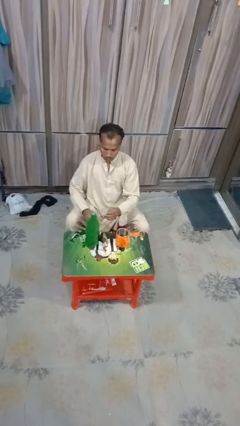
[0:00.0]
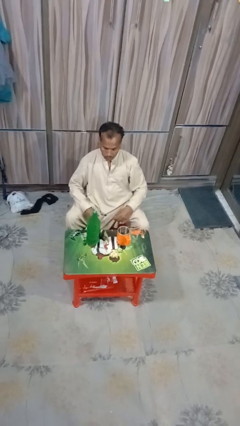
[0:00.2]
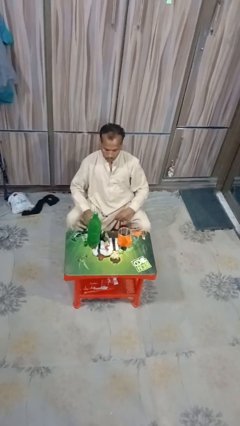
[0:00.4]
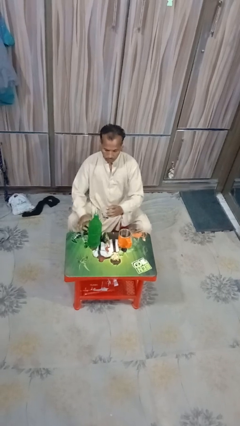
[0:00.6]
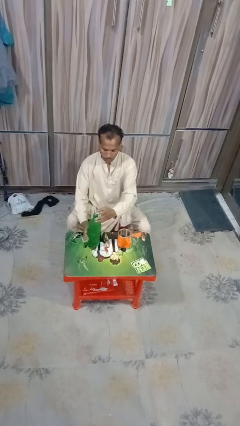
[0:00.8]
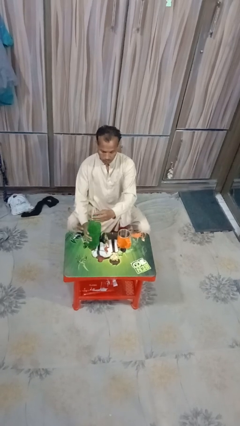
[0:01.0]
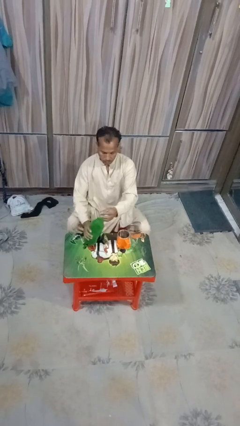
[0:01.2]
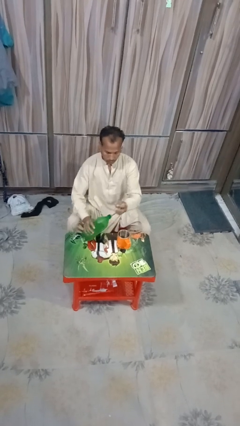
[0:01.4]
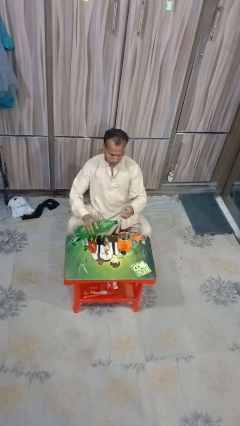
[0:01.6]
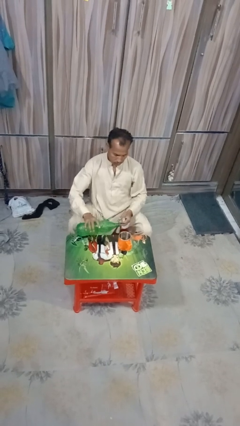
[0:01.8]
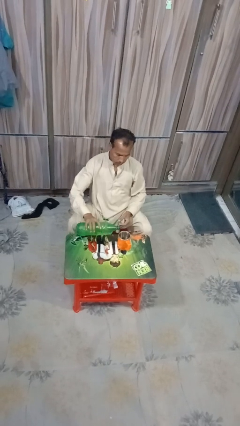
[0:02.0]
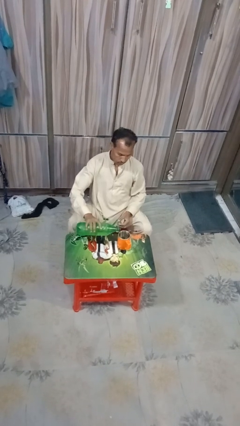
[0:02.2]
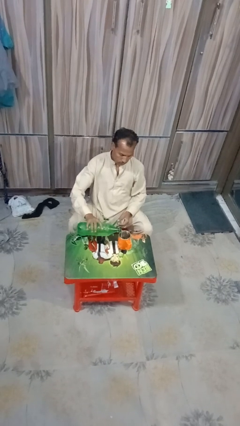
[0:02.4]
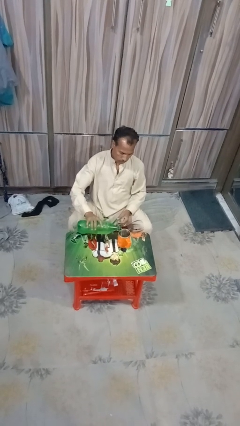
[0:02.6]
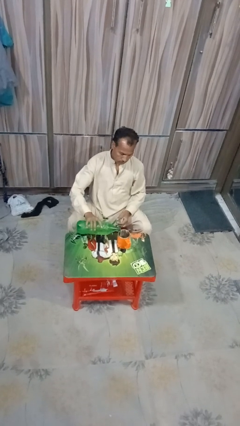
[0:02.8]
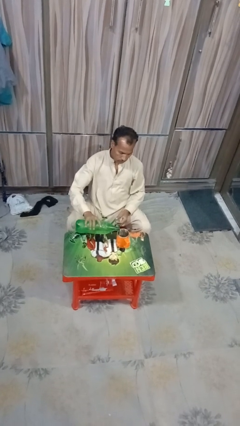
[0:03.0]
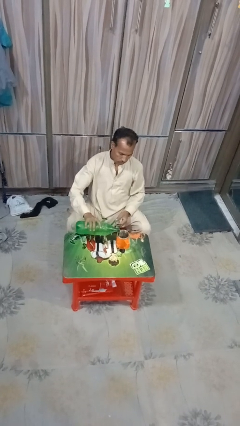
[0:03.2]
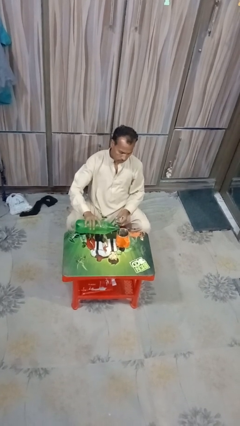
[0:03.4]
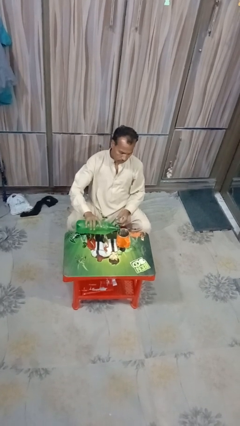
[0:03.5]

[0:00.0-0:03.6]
person pours liquid into cup

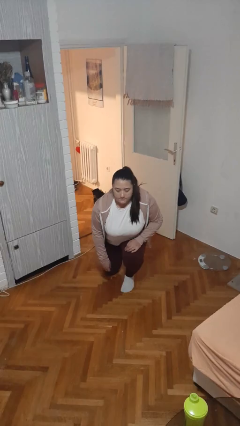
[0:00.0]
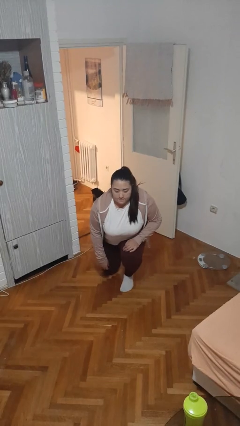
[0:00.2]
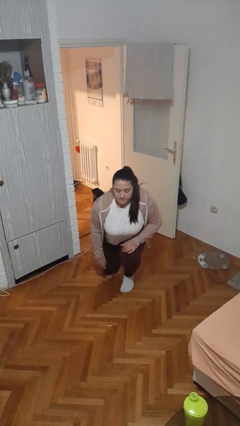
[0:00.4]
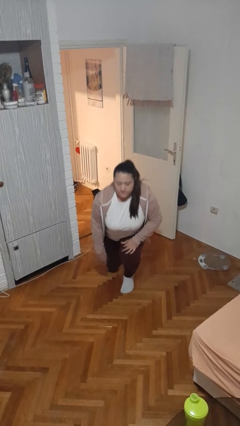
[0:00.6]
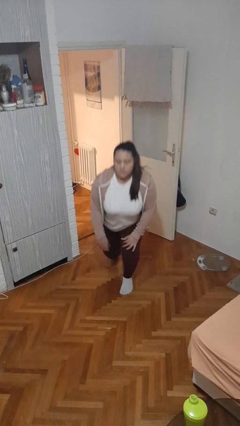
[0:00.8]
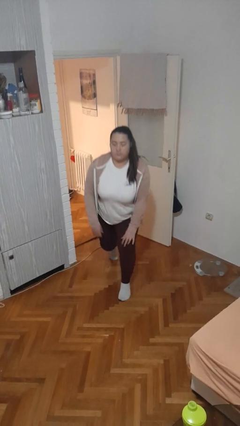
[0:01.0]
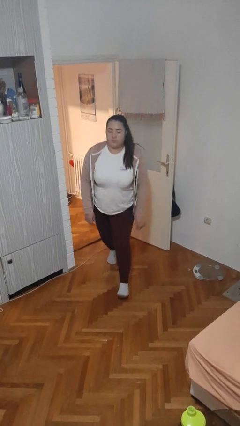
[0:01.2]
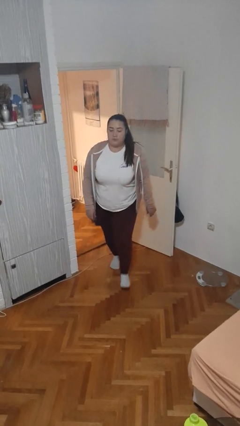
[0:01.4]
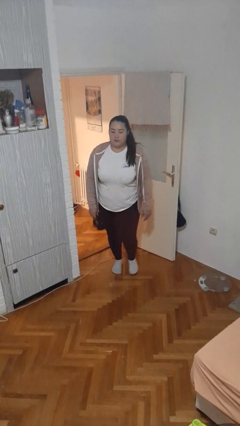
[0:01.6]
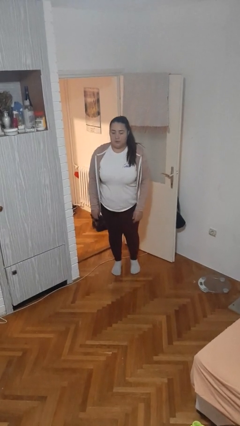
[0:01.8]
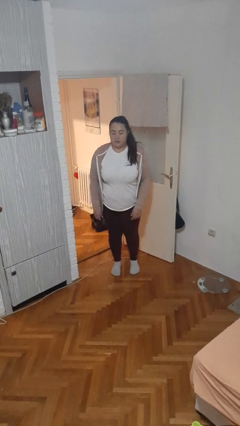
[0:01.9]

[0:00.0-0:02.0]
person stands up from floor

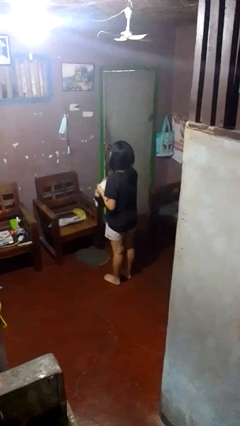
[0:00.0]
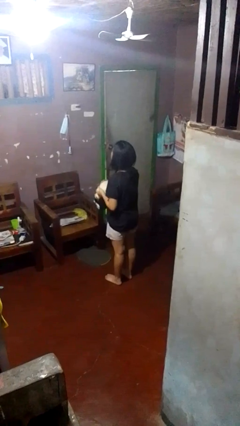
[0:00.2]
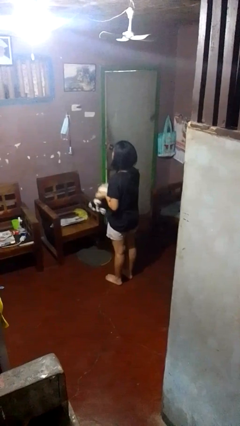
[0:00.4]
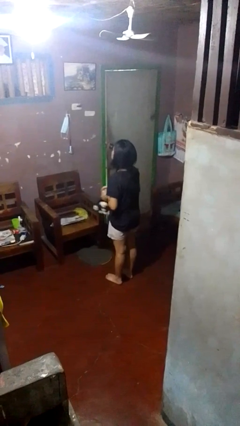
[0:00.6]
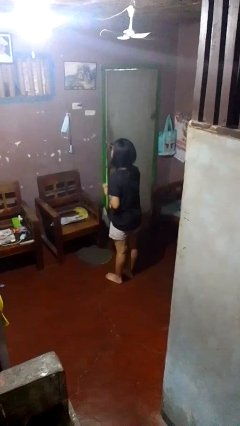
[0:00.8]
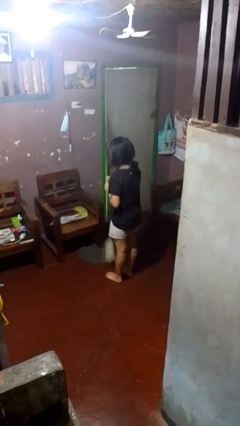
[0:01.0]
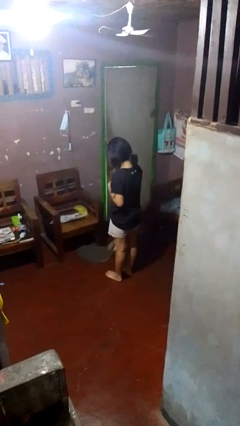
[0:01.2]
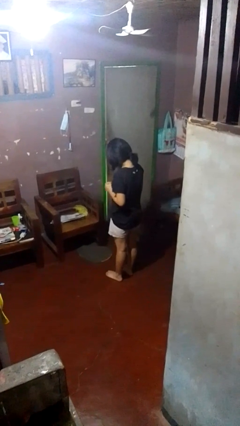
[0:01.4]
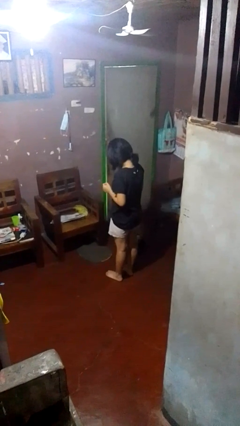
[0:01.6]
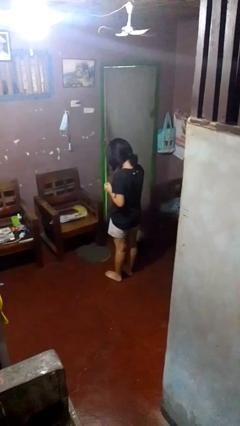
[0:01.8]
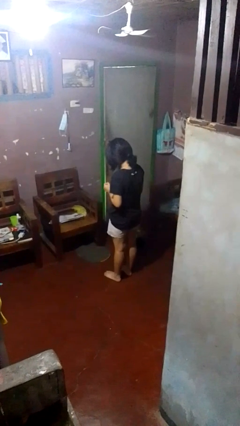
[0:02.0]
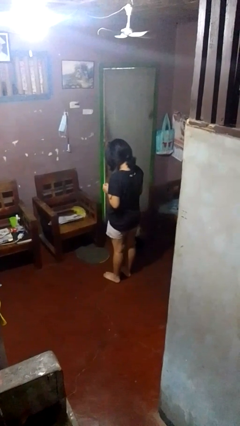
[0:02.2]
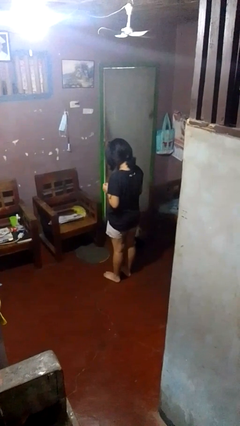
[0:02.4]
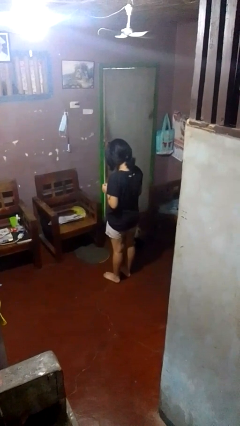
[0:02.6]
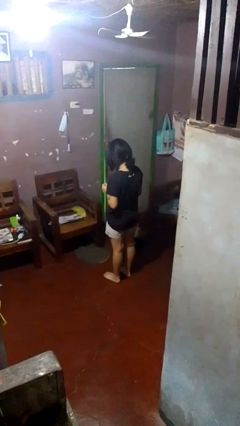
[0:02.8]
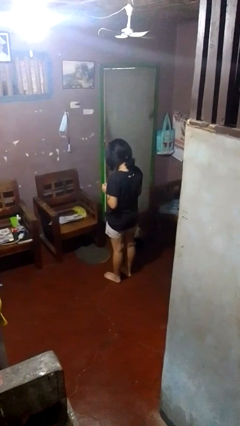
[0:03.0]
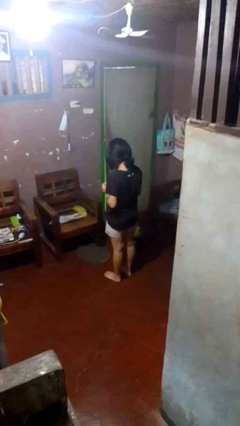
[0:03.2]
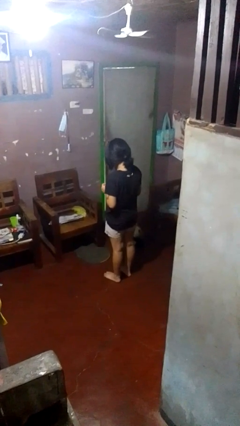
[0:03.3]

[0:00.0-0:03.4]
person drops object

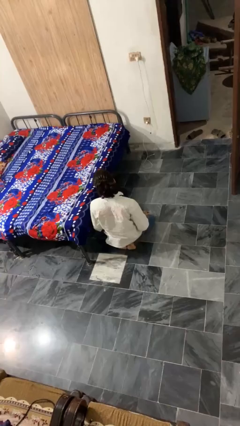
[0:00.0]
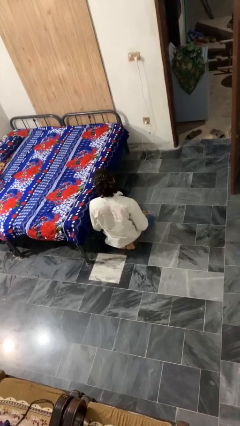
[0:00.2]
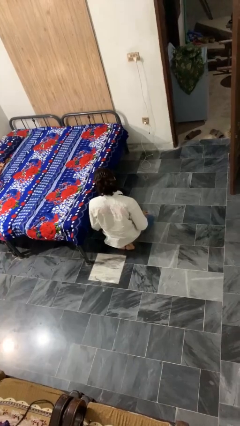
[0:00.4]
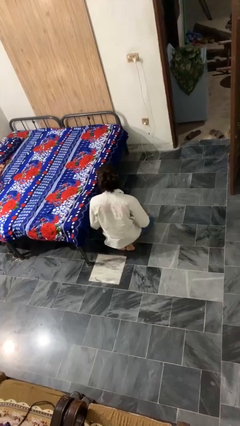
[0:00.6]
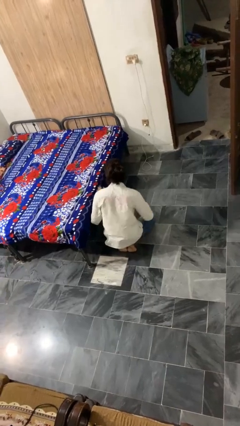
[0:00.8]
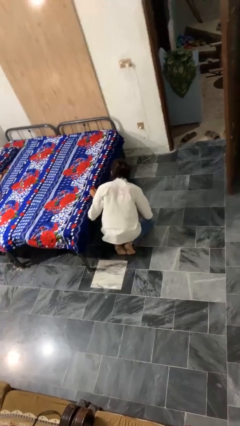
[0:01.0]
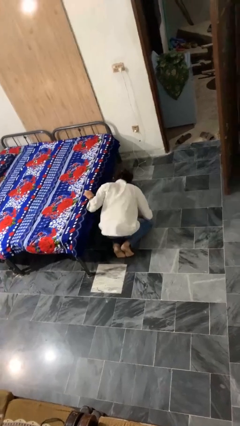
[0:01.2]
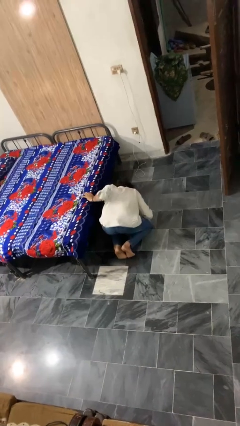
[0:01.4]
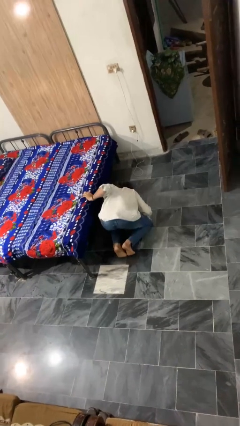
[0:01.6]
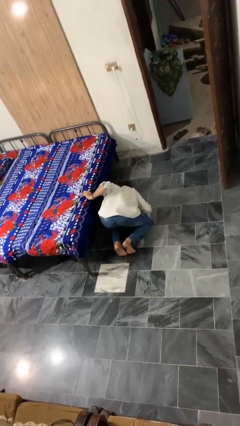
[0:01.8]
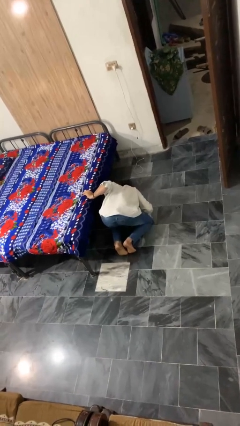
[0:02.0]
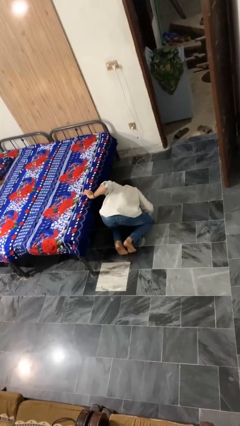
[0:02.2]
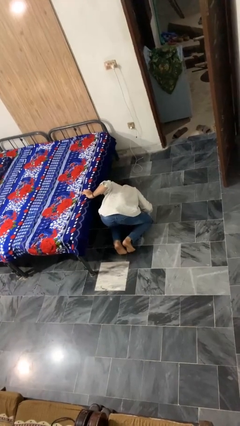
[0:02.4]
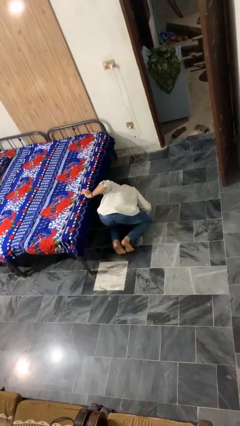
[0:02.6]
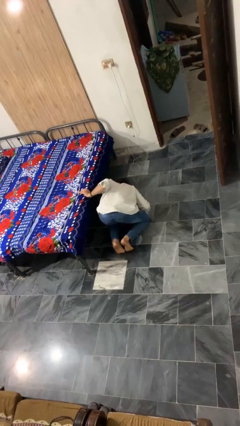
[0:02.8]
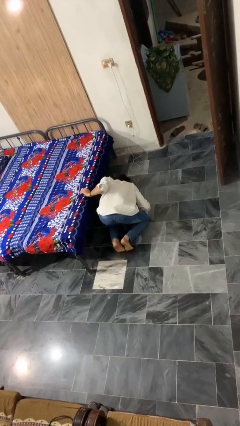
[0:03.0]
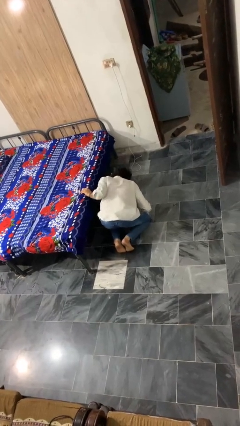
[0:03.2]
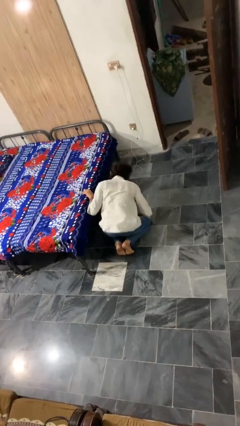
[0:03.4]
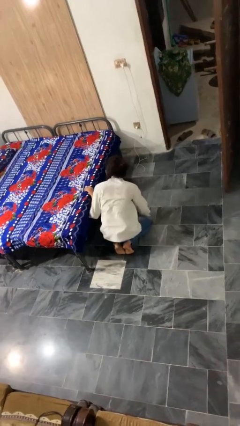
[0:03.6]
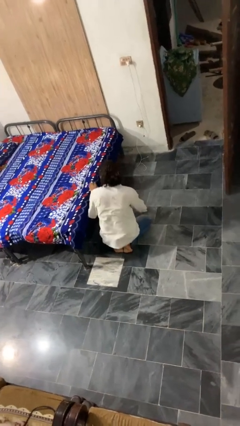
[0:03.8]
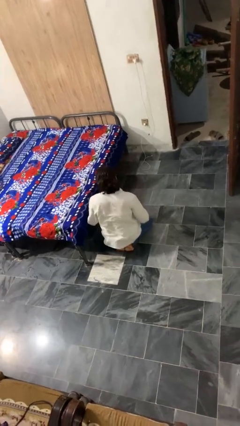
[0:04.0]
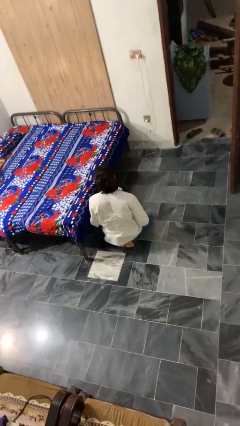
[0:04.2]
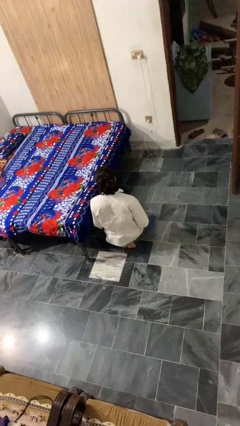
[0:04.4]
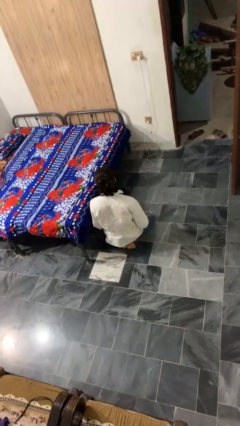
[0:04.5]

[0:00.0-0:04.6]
person searches under bed

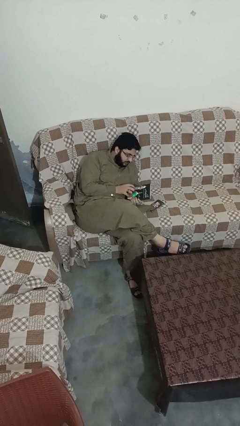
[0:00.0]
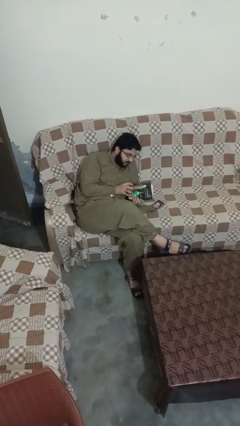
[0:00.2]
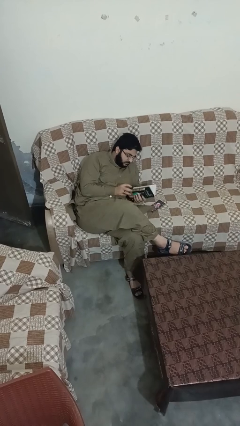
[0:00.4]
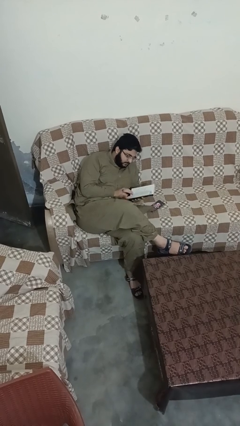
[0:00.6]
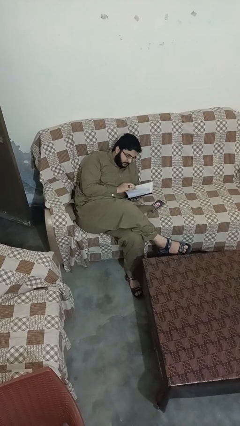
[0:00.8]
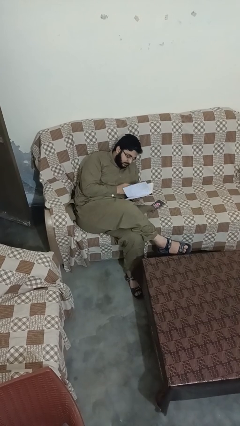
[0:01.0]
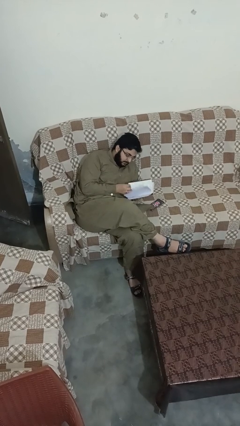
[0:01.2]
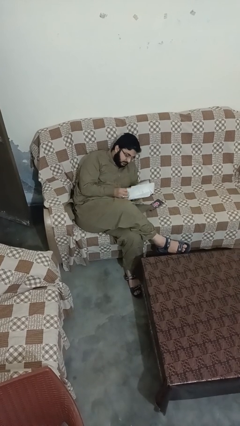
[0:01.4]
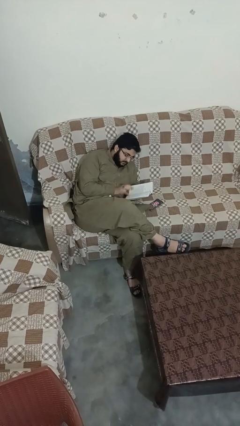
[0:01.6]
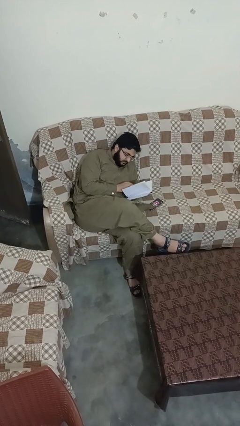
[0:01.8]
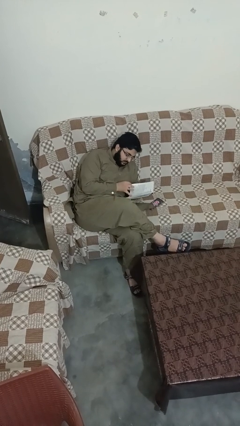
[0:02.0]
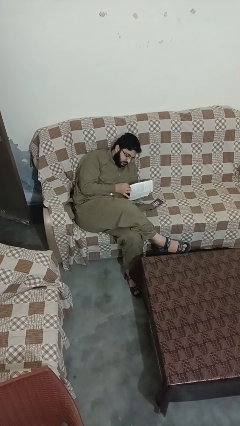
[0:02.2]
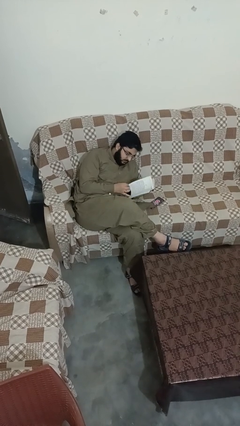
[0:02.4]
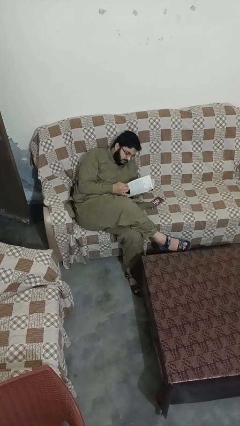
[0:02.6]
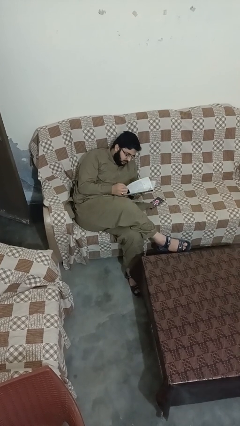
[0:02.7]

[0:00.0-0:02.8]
person reads book

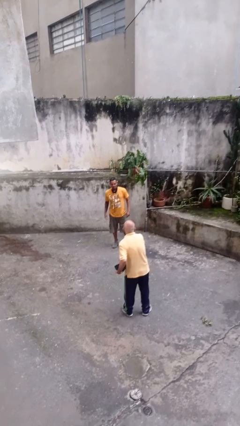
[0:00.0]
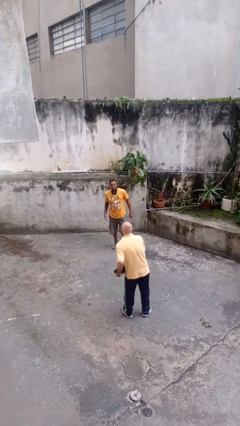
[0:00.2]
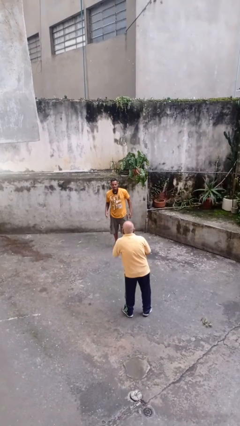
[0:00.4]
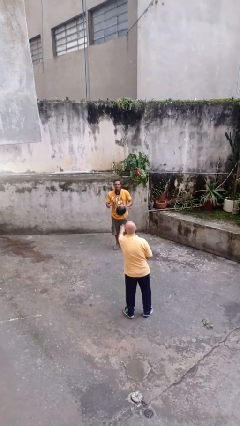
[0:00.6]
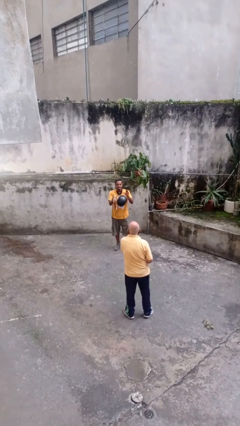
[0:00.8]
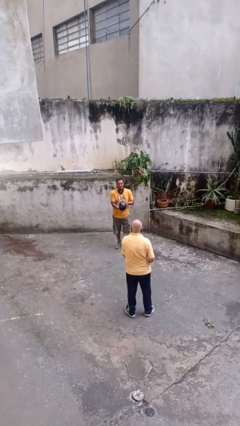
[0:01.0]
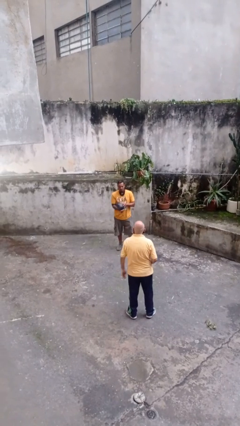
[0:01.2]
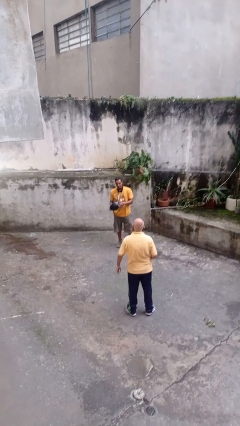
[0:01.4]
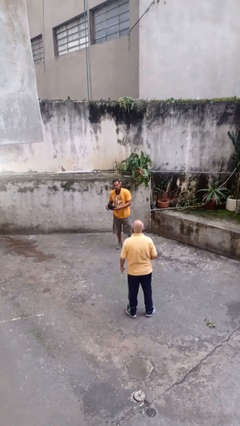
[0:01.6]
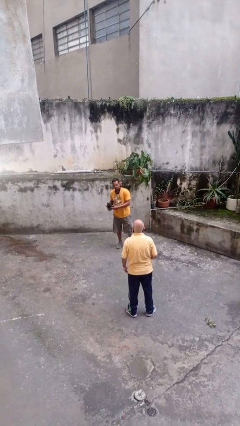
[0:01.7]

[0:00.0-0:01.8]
person catches object from person
